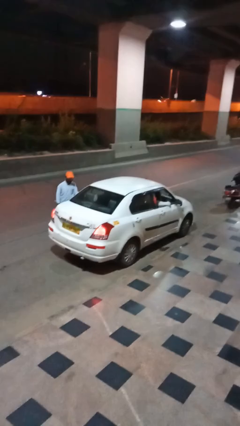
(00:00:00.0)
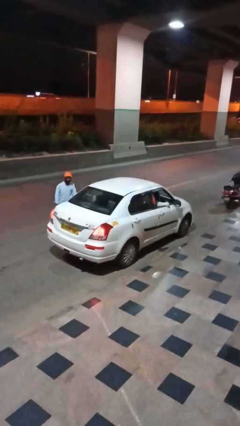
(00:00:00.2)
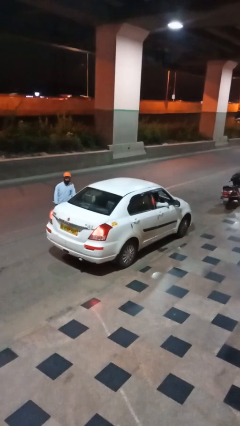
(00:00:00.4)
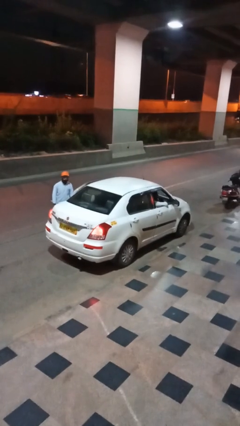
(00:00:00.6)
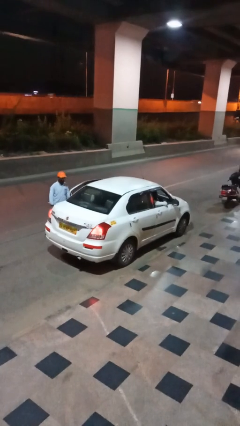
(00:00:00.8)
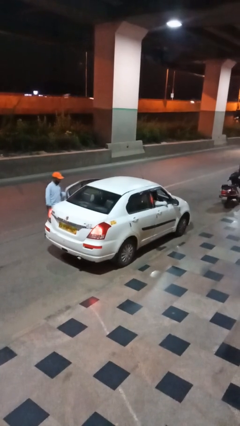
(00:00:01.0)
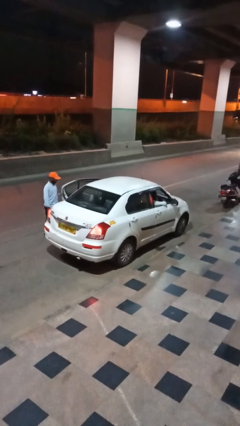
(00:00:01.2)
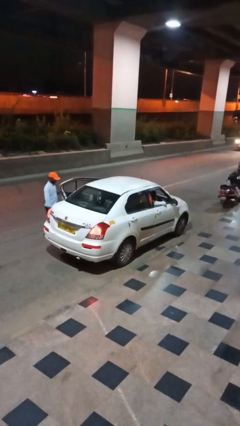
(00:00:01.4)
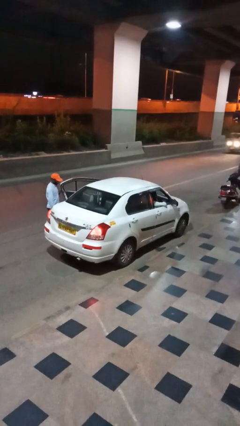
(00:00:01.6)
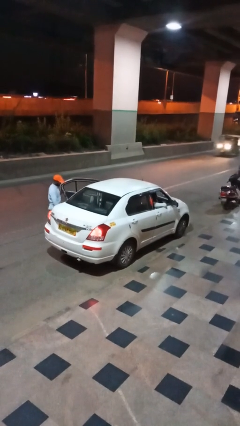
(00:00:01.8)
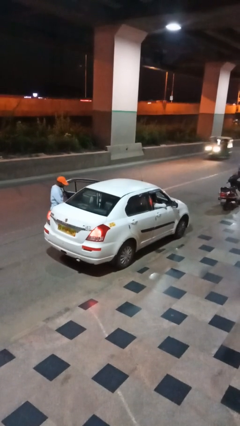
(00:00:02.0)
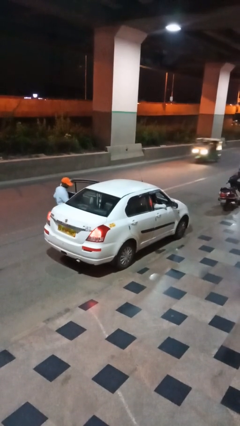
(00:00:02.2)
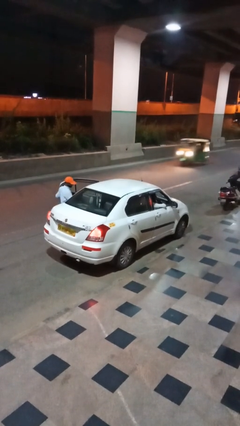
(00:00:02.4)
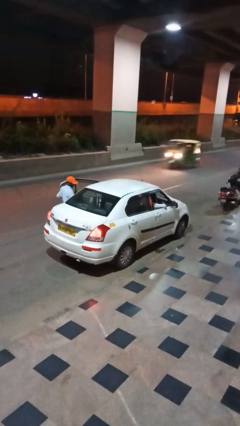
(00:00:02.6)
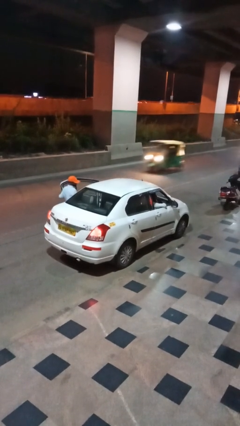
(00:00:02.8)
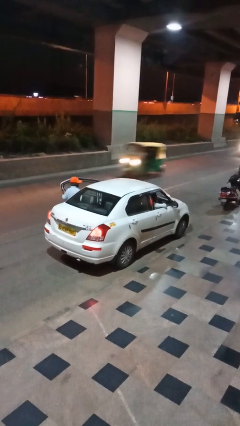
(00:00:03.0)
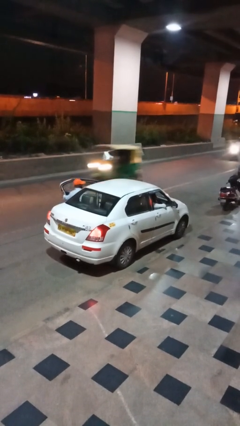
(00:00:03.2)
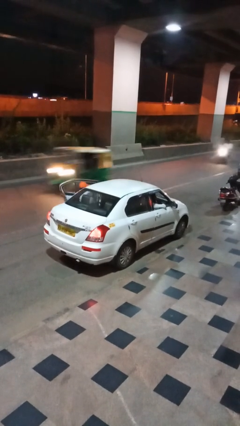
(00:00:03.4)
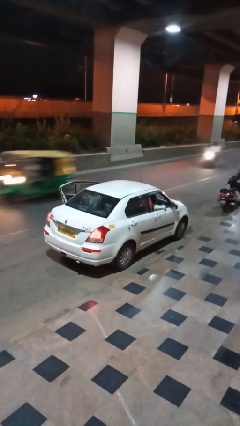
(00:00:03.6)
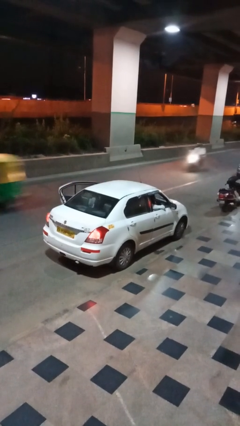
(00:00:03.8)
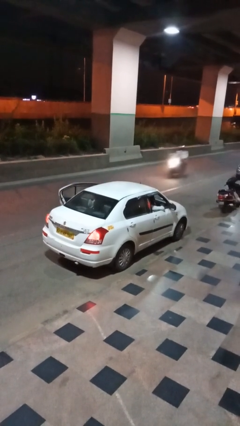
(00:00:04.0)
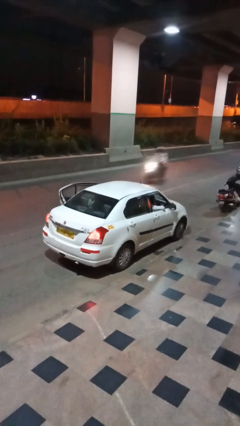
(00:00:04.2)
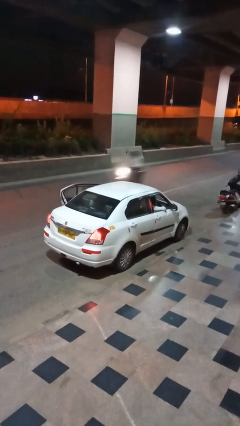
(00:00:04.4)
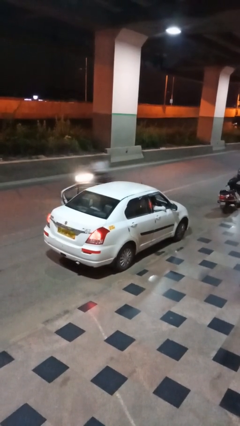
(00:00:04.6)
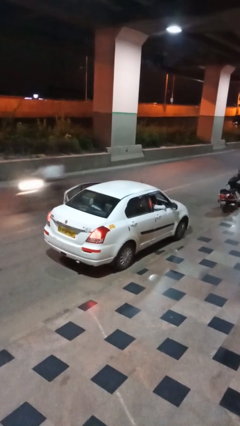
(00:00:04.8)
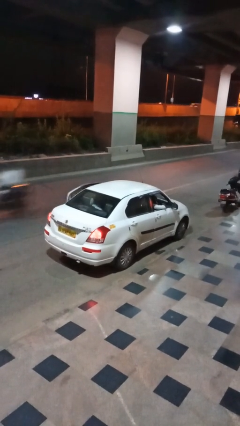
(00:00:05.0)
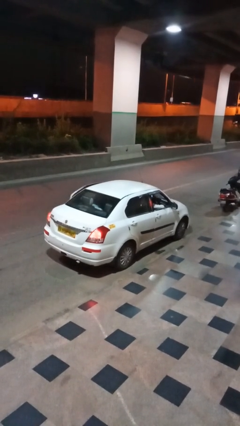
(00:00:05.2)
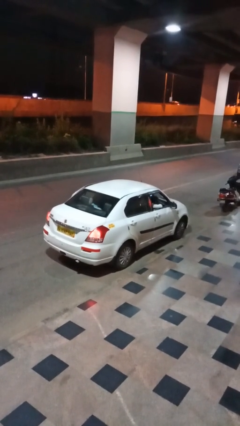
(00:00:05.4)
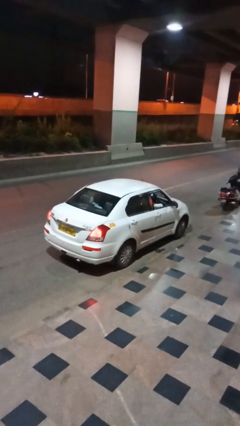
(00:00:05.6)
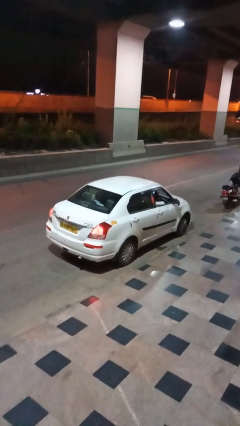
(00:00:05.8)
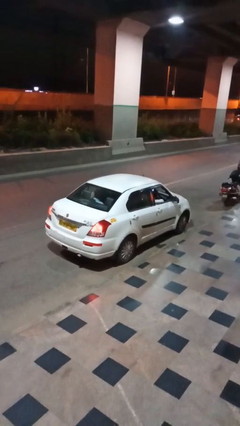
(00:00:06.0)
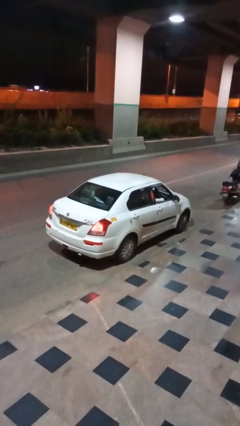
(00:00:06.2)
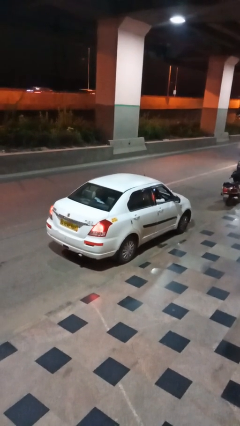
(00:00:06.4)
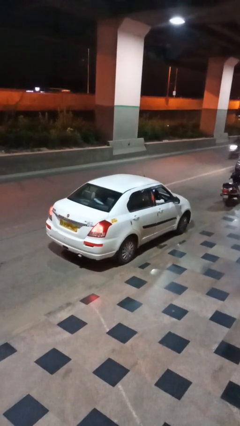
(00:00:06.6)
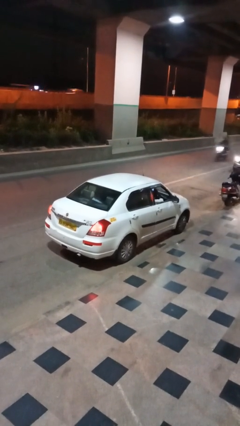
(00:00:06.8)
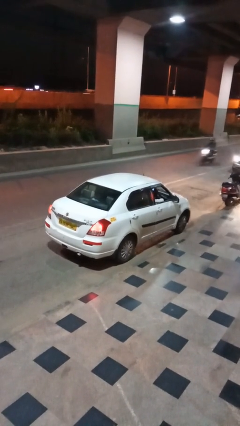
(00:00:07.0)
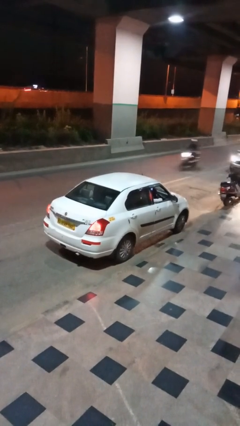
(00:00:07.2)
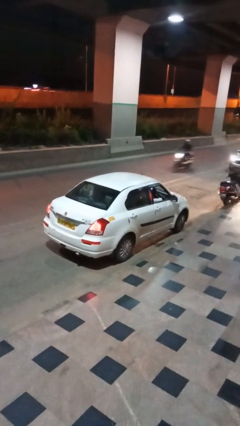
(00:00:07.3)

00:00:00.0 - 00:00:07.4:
car picks up person

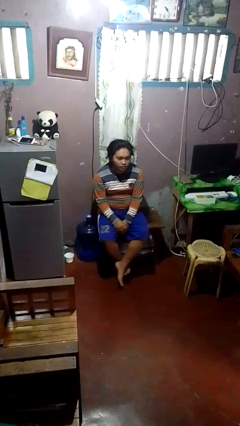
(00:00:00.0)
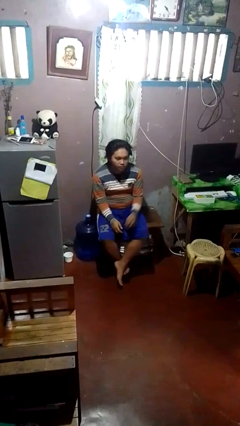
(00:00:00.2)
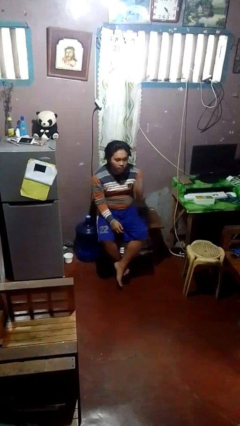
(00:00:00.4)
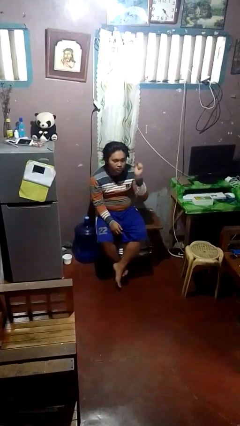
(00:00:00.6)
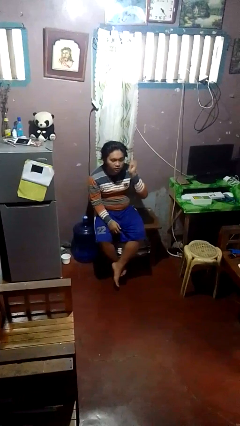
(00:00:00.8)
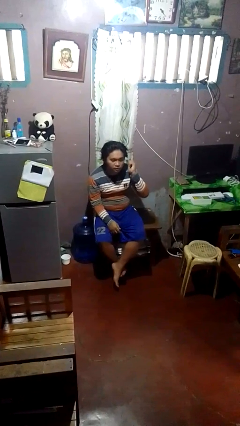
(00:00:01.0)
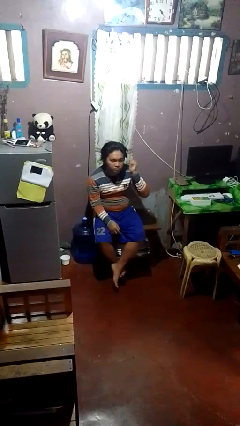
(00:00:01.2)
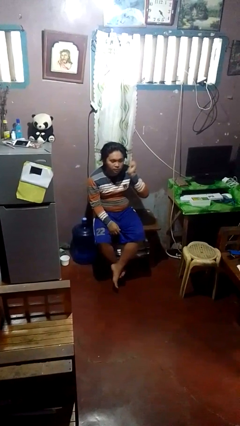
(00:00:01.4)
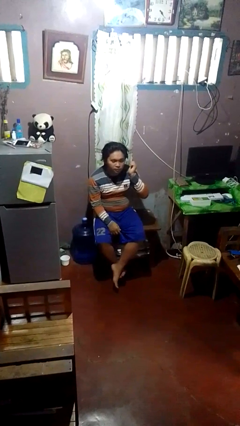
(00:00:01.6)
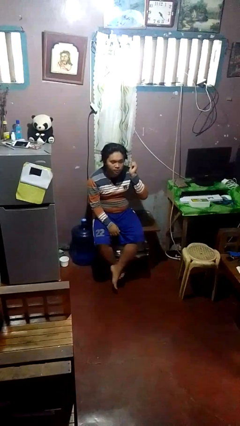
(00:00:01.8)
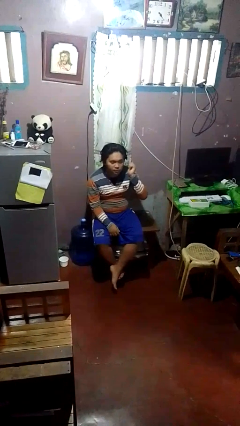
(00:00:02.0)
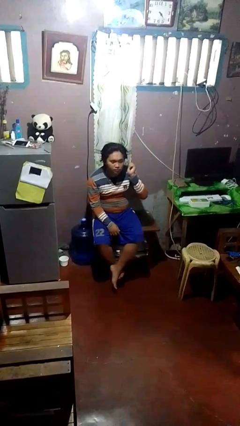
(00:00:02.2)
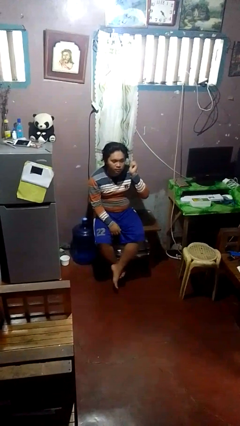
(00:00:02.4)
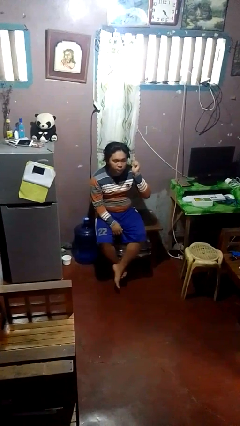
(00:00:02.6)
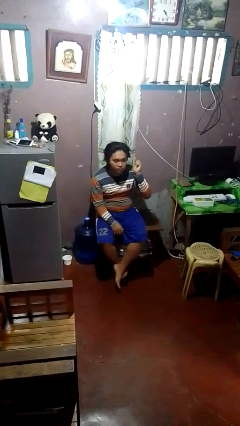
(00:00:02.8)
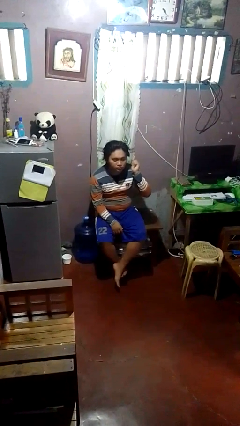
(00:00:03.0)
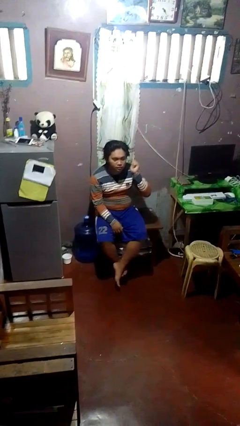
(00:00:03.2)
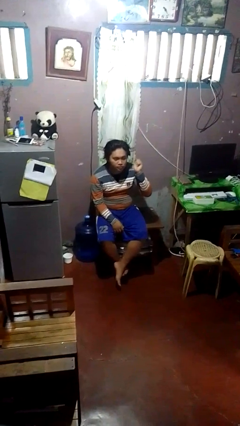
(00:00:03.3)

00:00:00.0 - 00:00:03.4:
person gestures listen closely

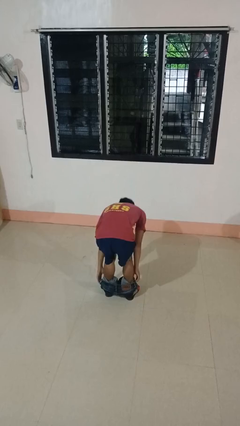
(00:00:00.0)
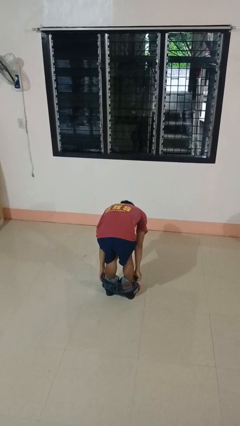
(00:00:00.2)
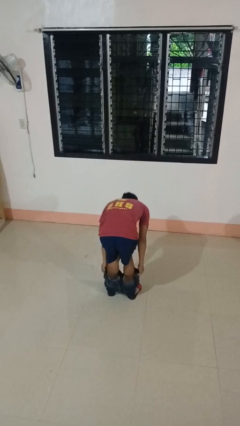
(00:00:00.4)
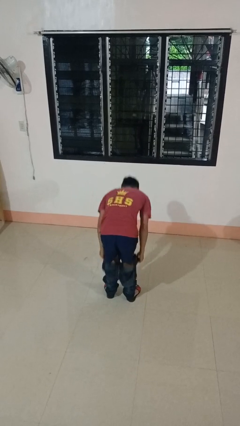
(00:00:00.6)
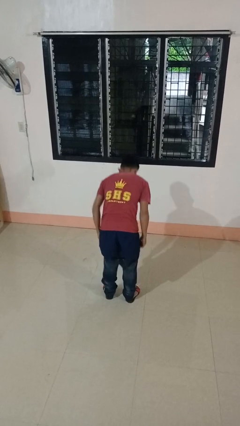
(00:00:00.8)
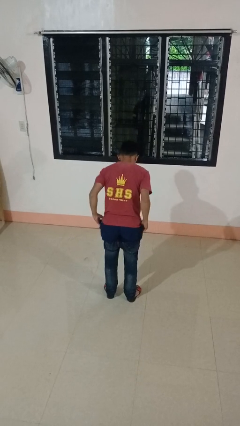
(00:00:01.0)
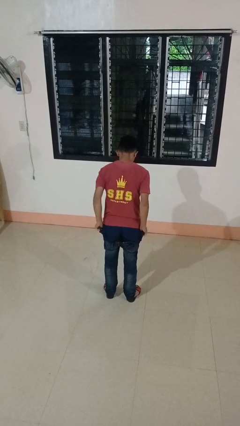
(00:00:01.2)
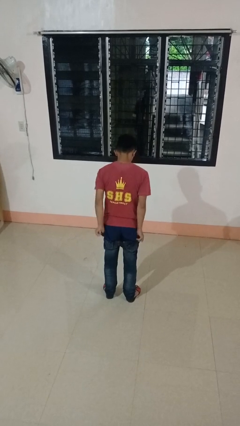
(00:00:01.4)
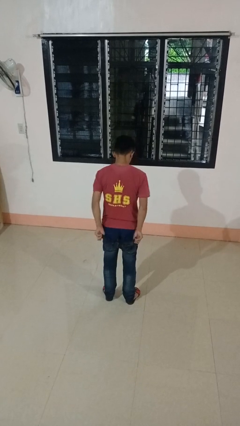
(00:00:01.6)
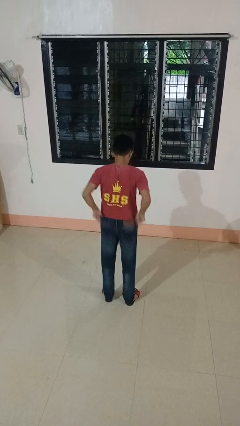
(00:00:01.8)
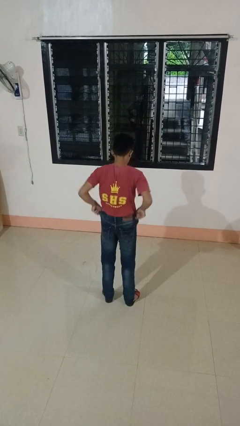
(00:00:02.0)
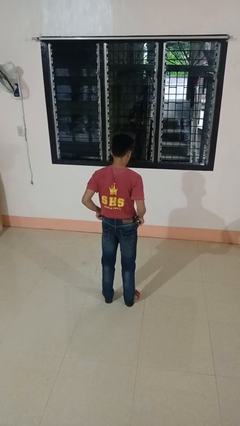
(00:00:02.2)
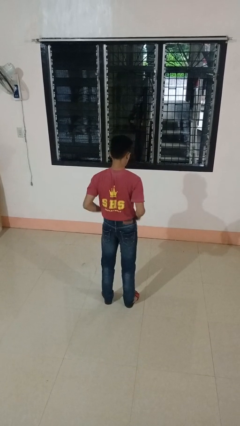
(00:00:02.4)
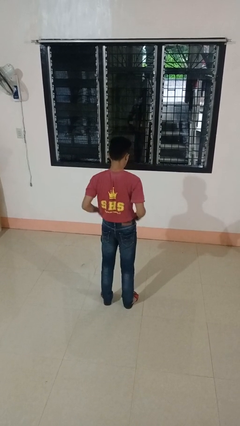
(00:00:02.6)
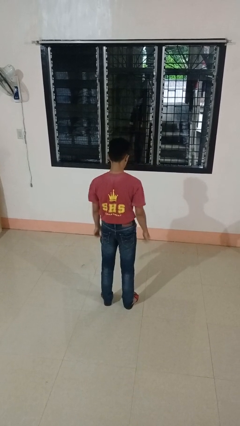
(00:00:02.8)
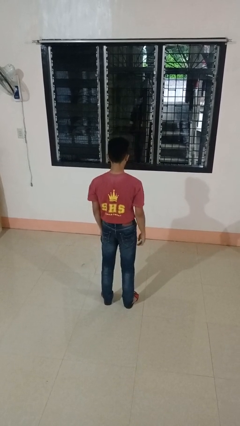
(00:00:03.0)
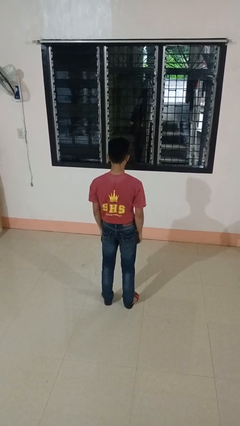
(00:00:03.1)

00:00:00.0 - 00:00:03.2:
person puts on pants

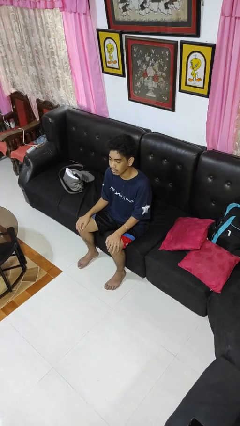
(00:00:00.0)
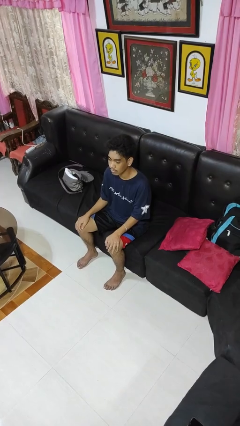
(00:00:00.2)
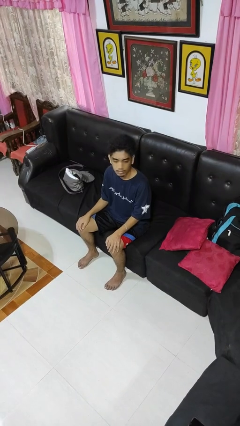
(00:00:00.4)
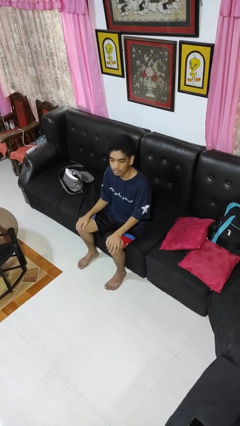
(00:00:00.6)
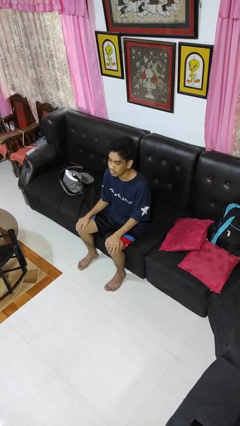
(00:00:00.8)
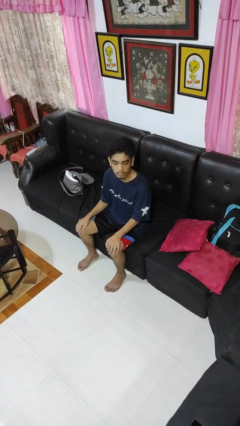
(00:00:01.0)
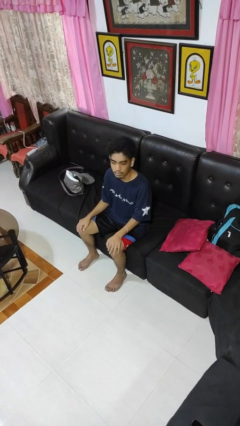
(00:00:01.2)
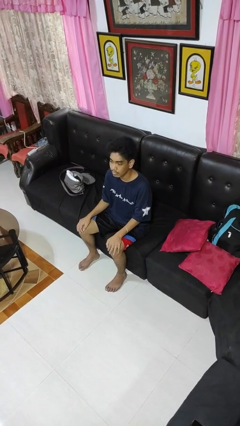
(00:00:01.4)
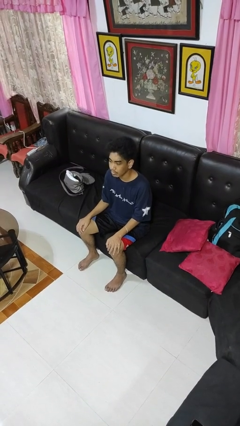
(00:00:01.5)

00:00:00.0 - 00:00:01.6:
person shakes head

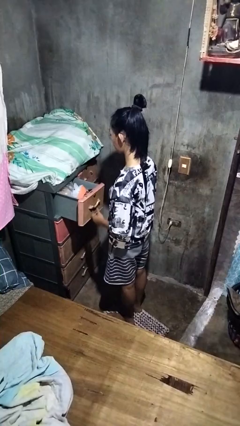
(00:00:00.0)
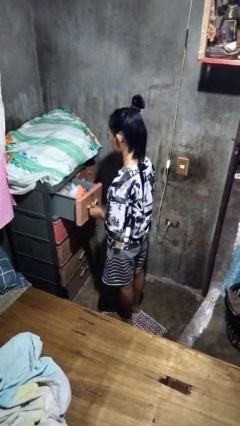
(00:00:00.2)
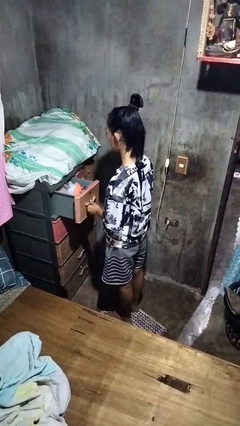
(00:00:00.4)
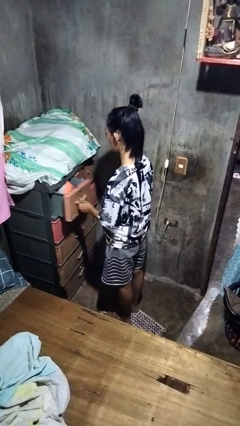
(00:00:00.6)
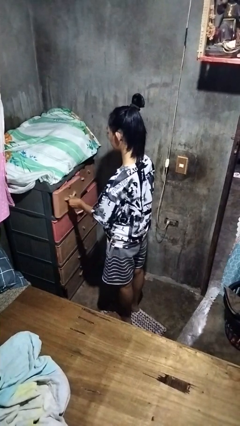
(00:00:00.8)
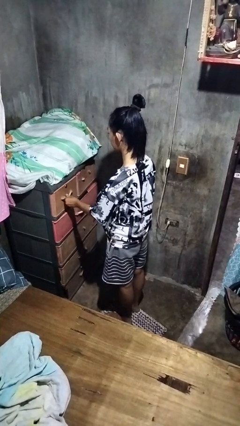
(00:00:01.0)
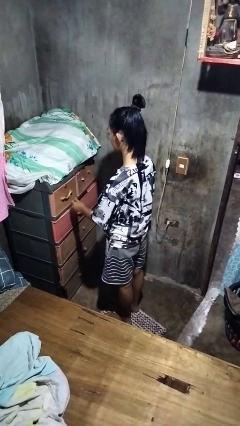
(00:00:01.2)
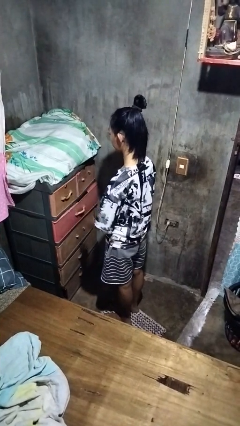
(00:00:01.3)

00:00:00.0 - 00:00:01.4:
person closes dresser drawer

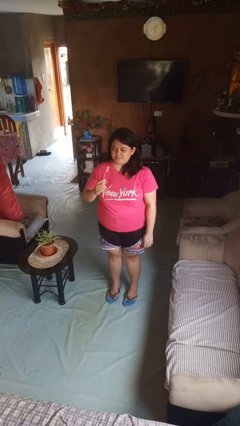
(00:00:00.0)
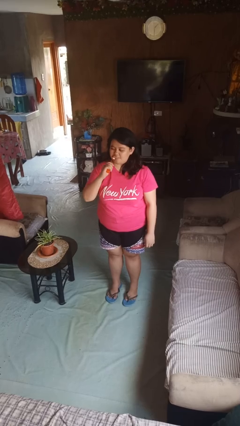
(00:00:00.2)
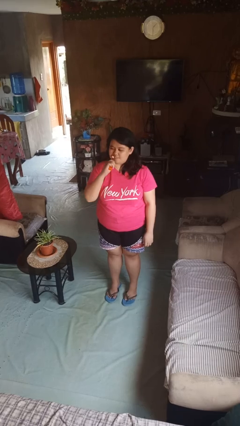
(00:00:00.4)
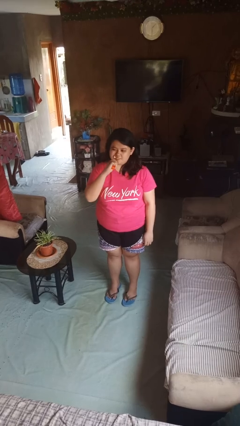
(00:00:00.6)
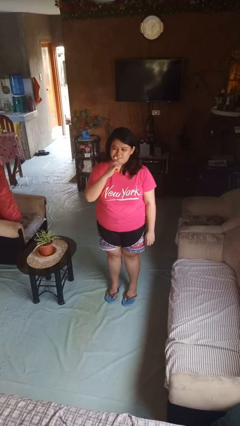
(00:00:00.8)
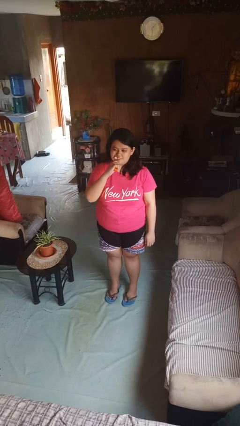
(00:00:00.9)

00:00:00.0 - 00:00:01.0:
person brushes teeth
